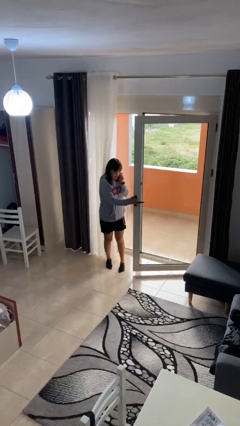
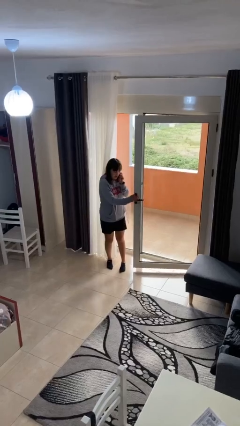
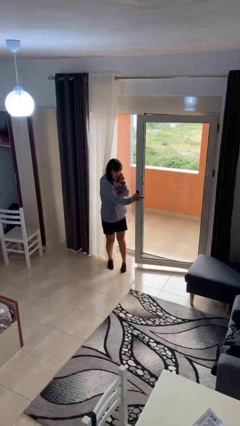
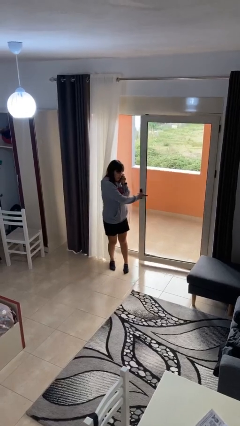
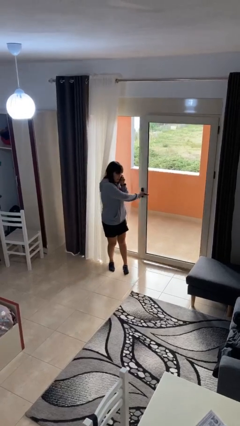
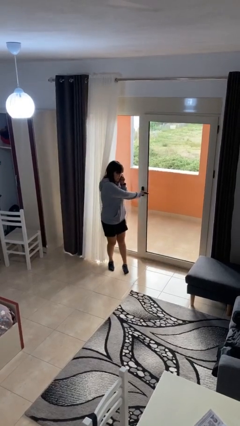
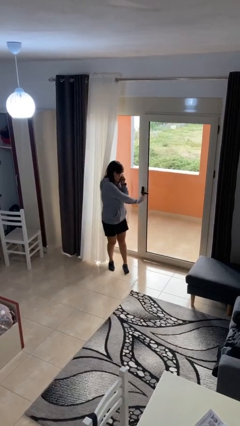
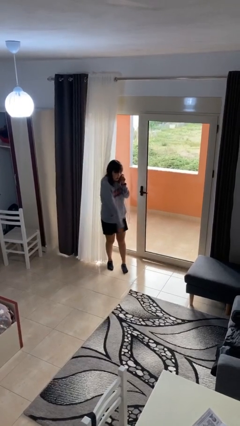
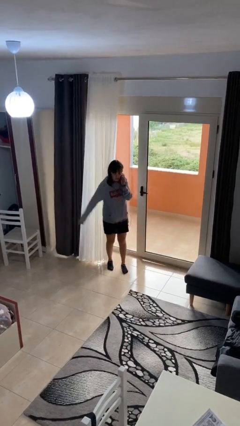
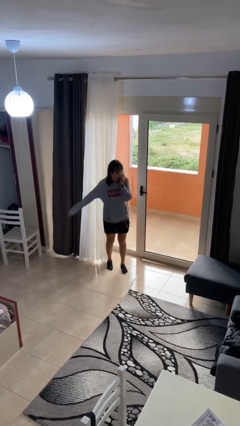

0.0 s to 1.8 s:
person closes facility door

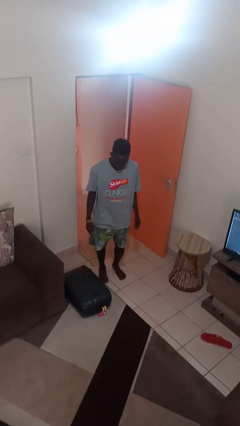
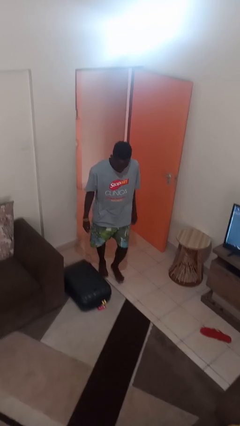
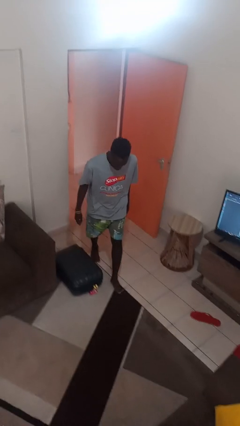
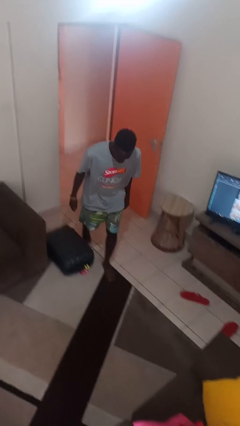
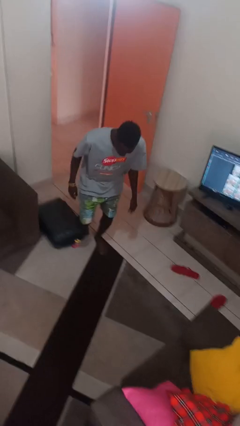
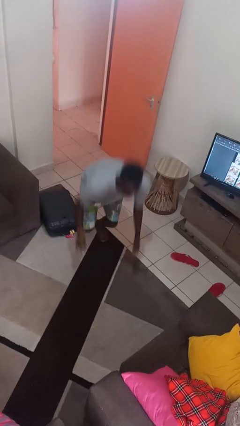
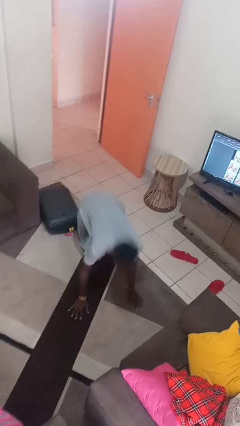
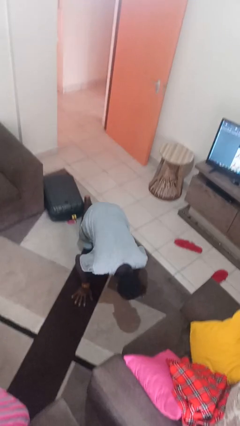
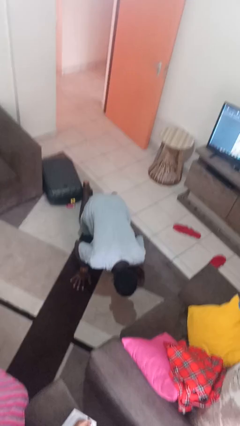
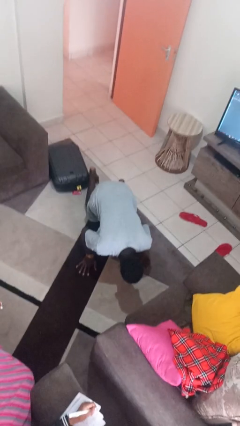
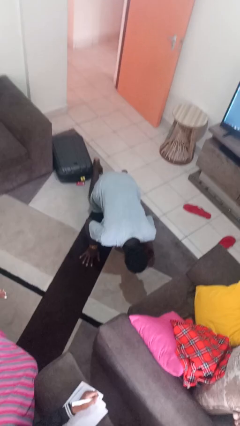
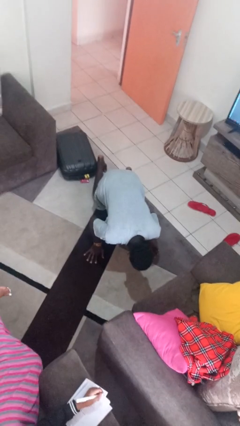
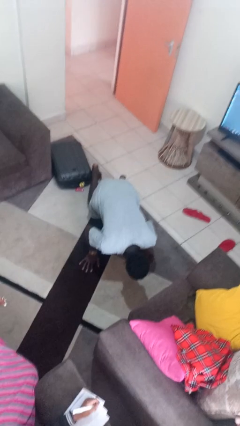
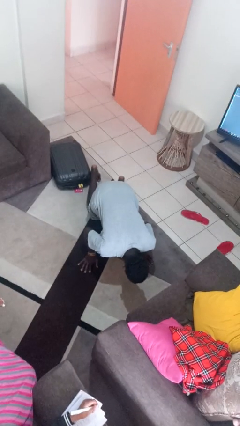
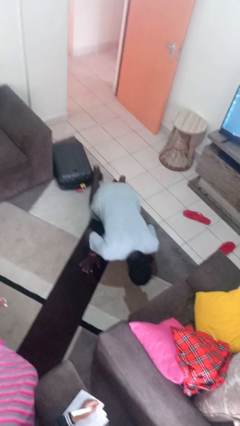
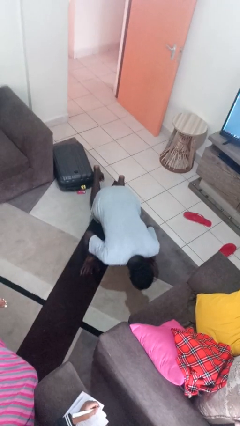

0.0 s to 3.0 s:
person trips on object on floor

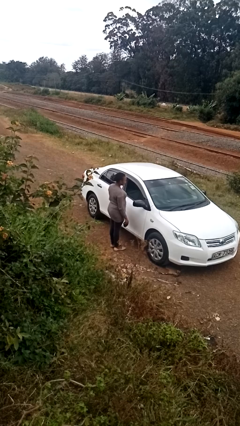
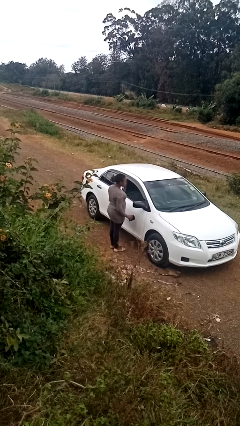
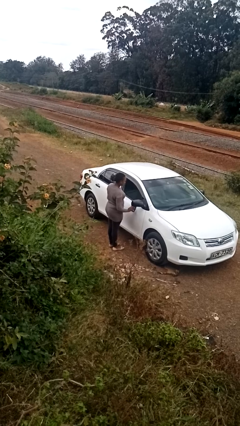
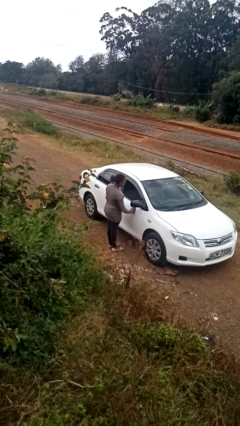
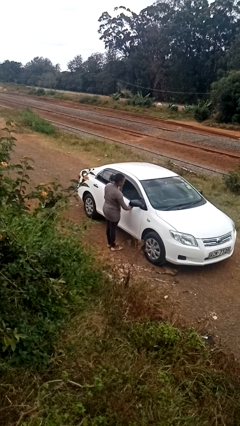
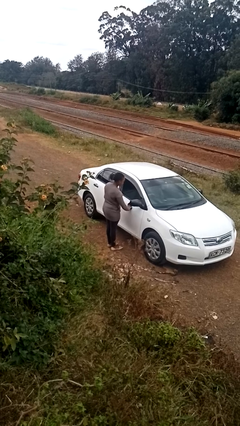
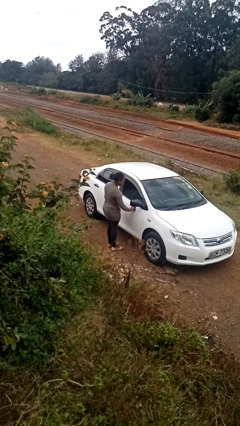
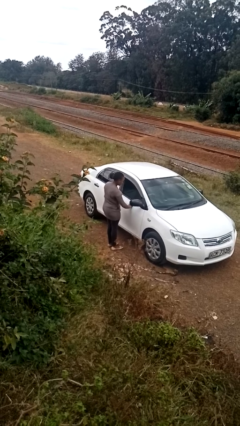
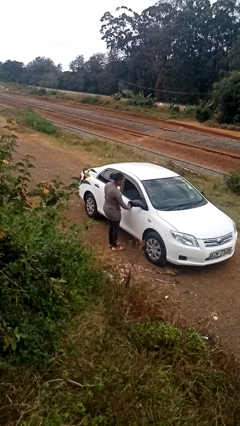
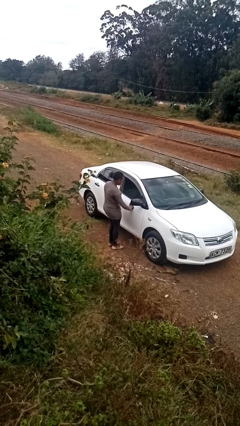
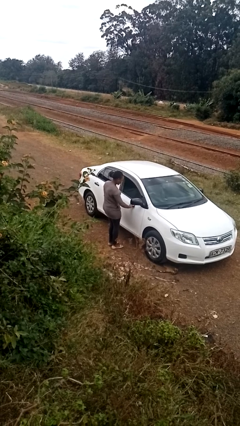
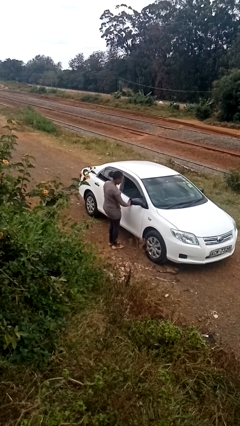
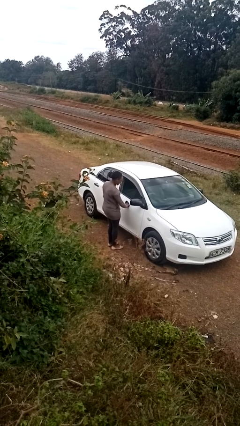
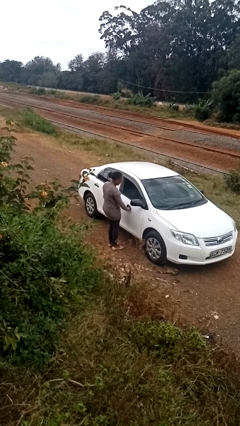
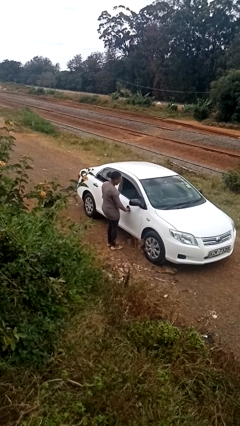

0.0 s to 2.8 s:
person polishes car with rag

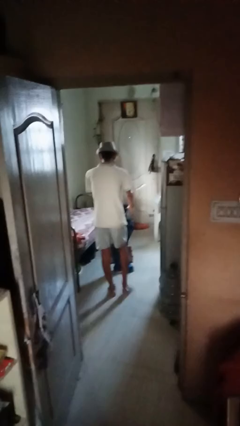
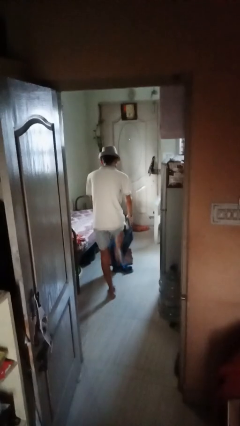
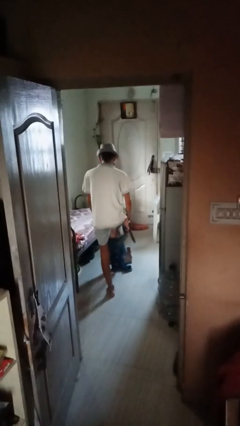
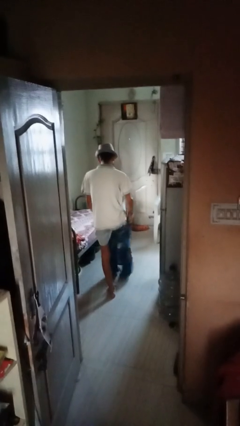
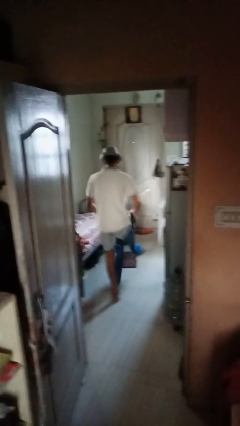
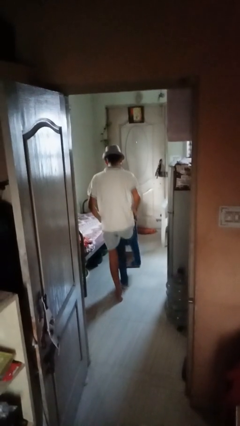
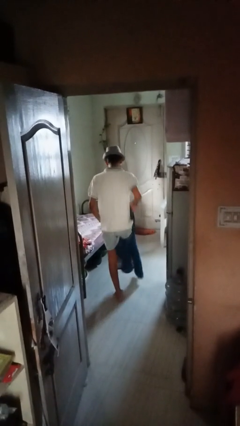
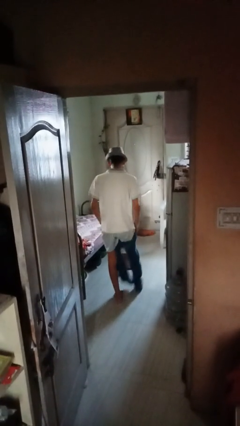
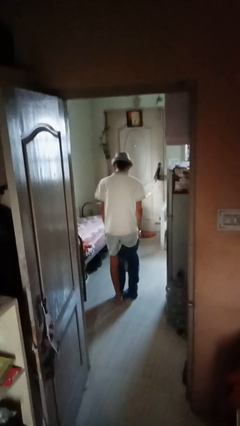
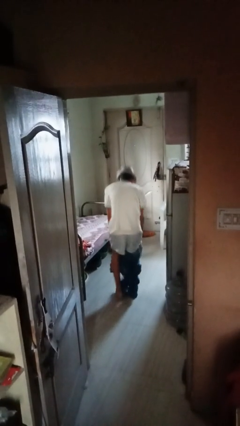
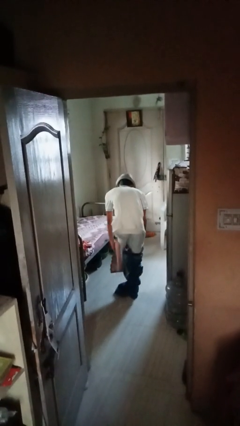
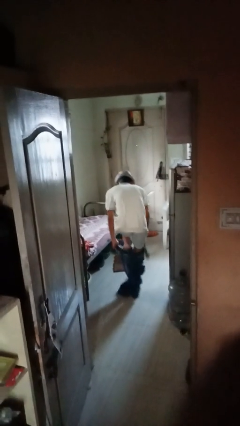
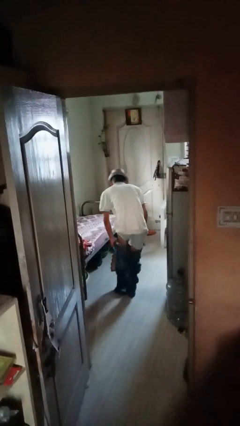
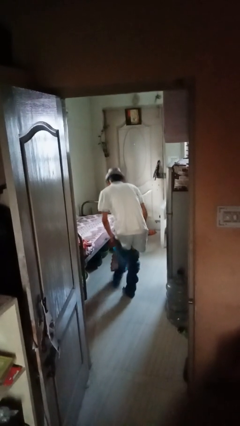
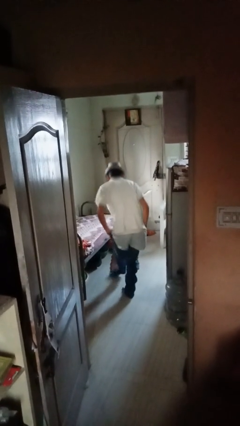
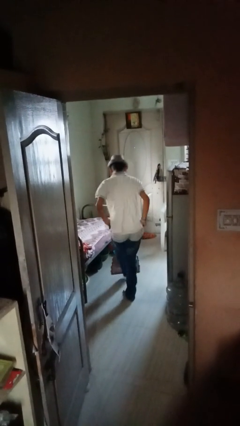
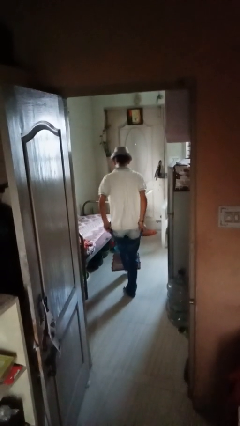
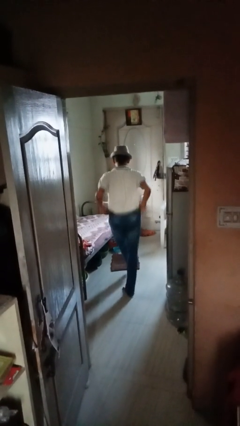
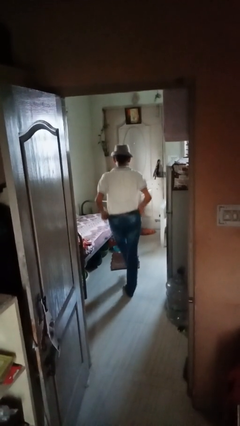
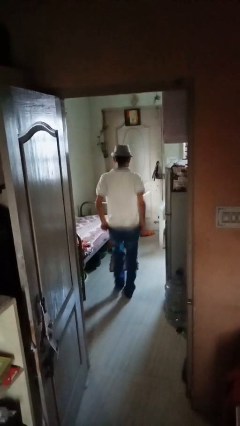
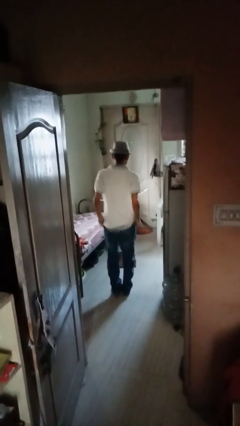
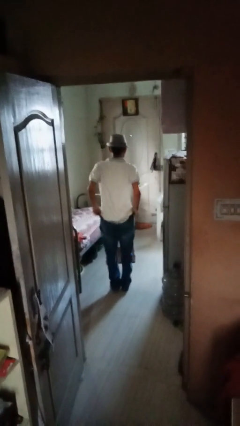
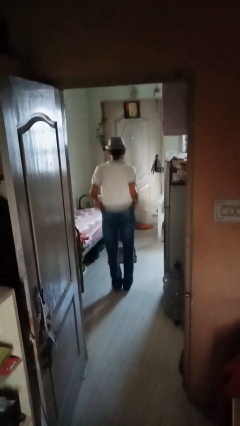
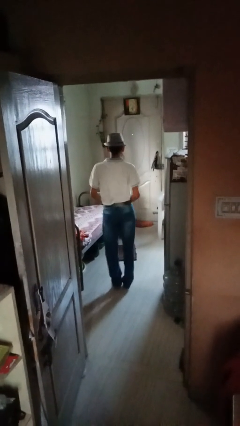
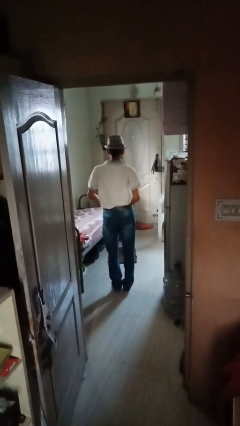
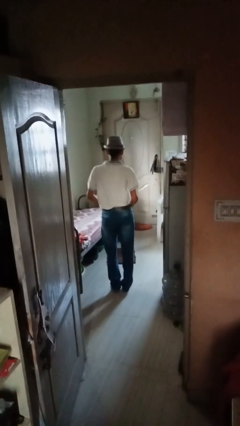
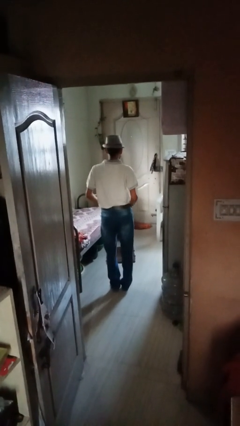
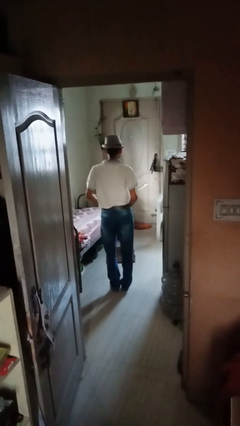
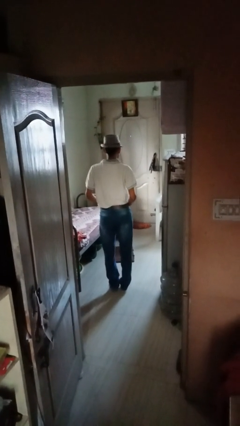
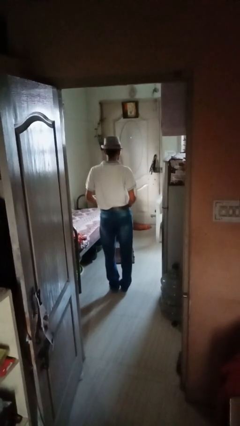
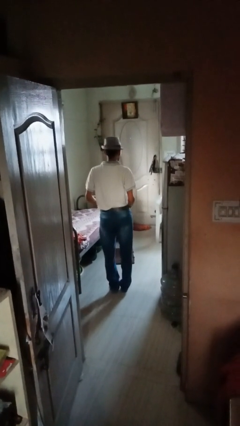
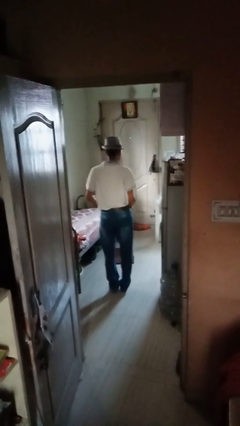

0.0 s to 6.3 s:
person puts on pants

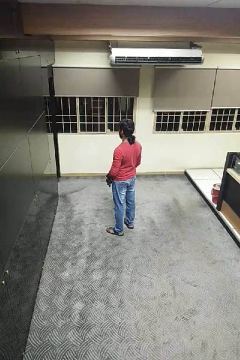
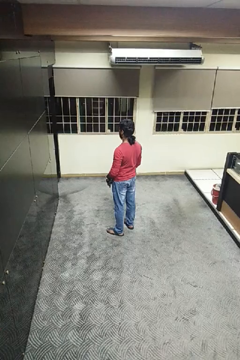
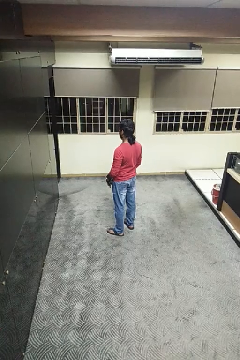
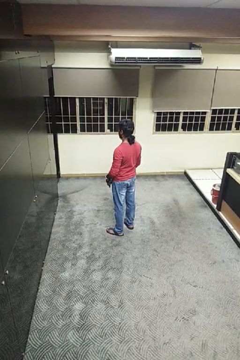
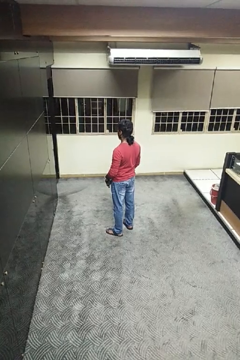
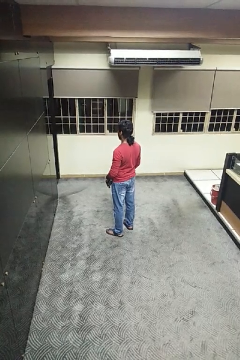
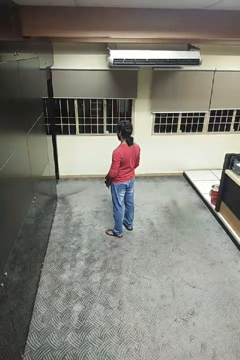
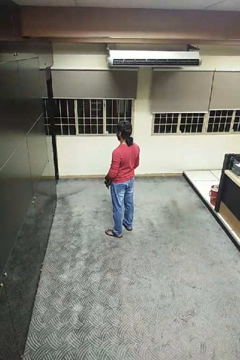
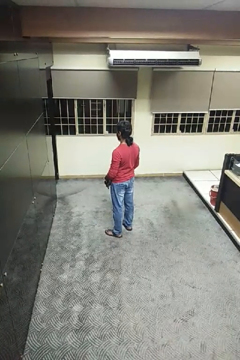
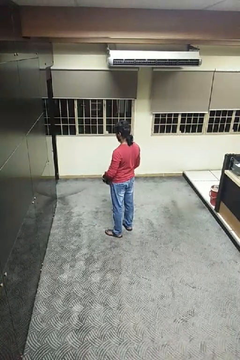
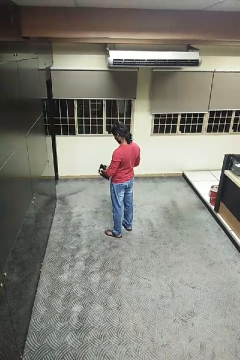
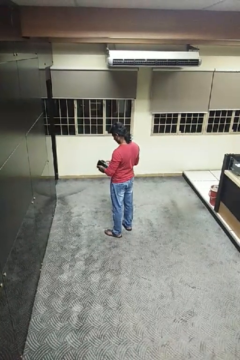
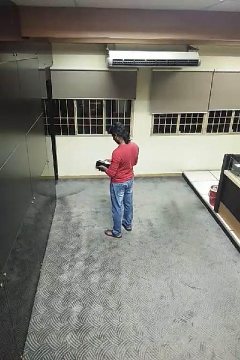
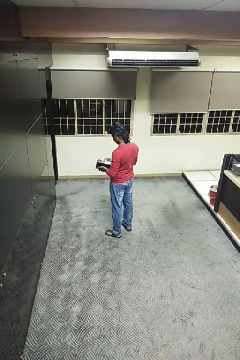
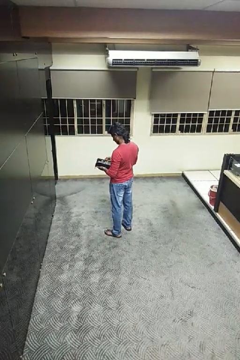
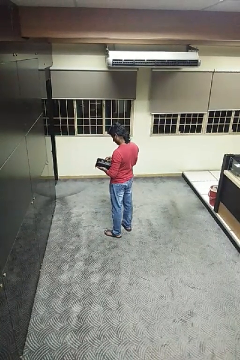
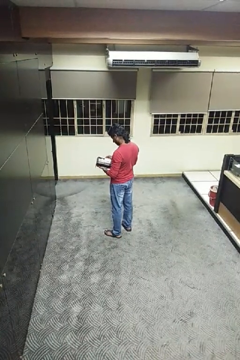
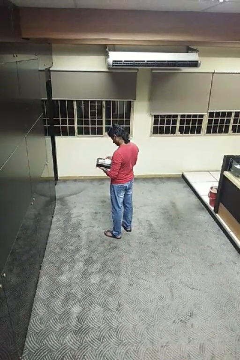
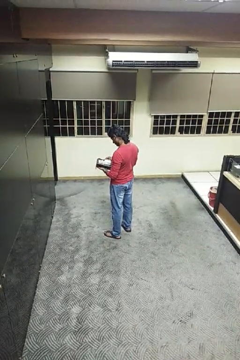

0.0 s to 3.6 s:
person searches in purse

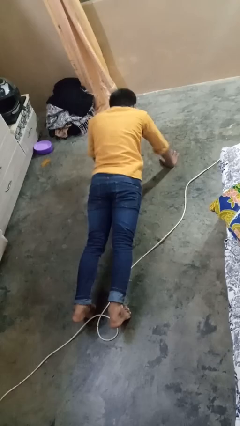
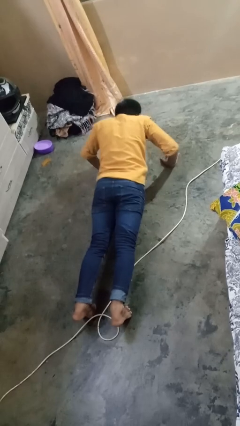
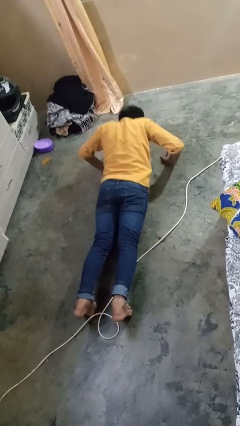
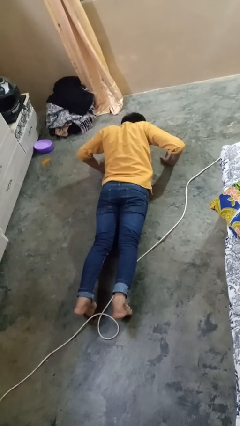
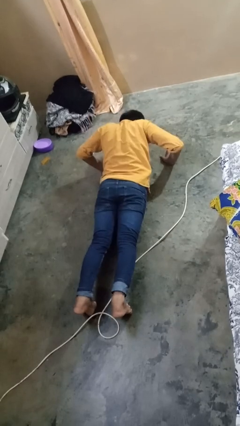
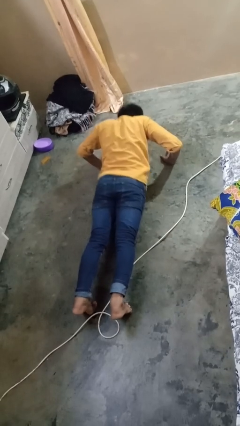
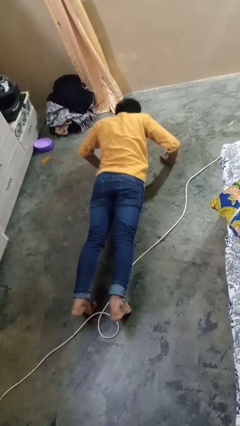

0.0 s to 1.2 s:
person exercises with pushup
